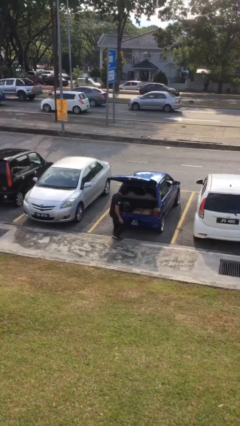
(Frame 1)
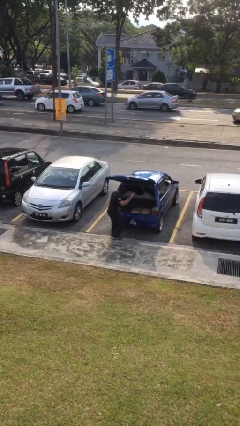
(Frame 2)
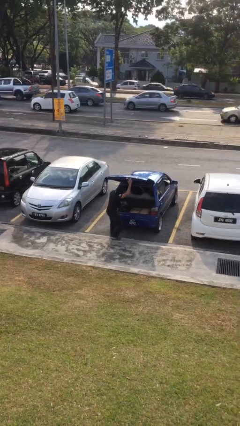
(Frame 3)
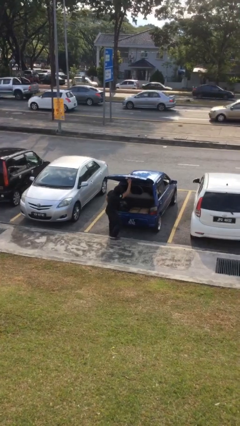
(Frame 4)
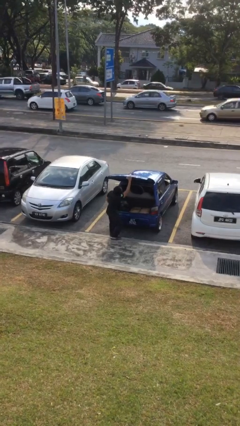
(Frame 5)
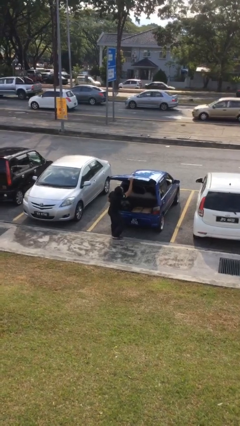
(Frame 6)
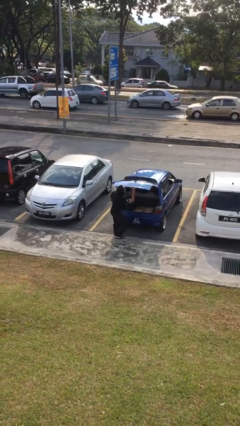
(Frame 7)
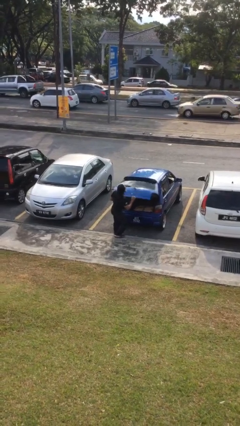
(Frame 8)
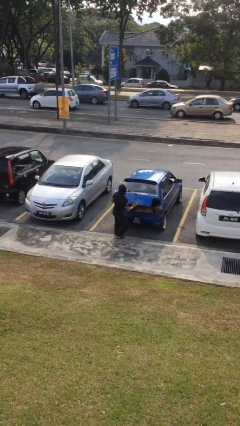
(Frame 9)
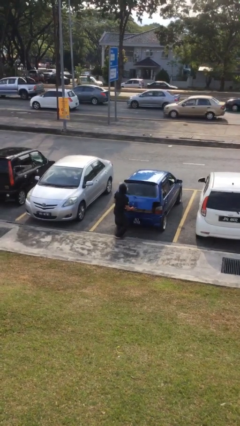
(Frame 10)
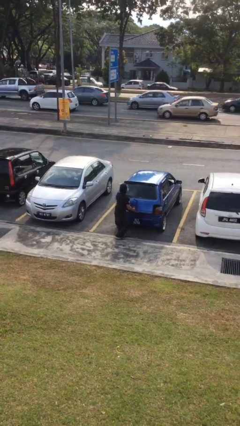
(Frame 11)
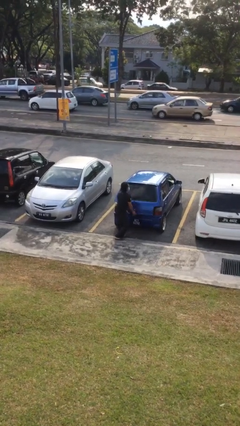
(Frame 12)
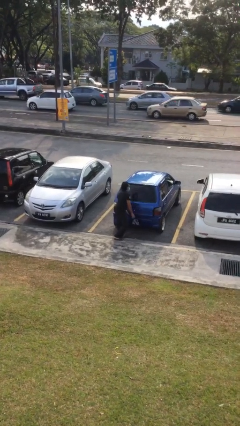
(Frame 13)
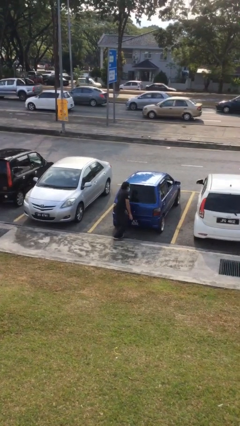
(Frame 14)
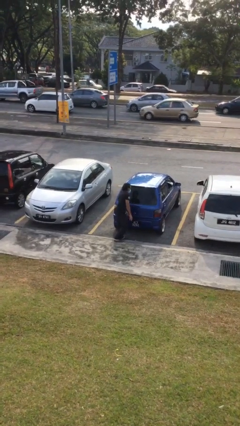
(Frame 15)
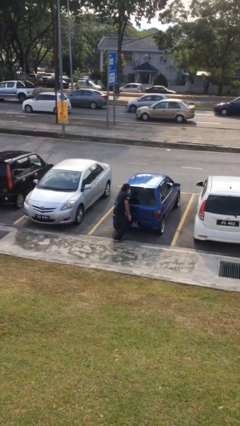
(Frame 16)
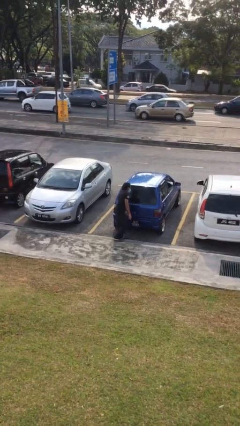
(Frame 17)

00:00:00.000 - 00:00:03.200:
person closes car trunk

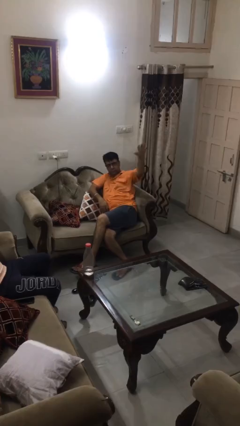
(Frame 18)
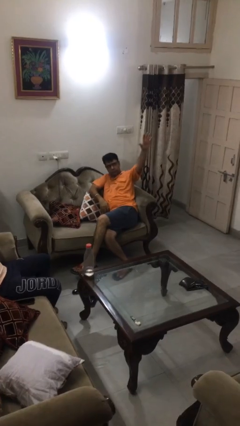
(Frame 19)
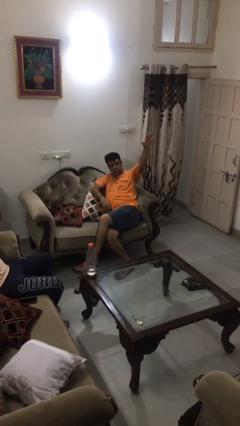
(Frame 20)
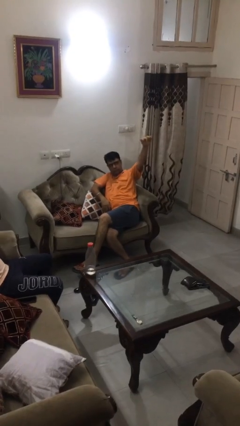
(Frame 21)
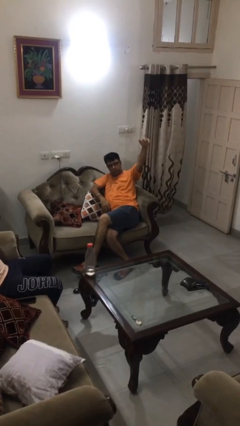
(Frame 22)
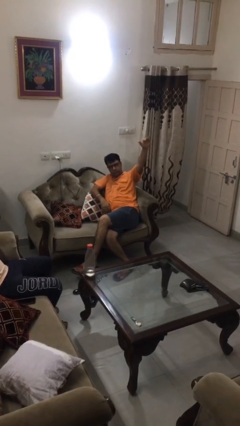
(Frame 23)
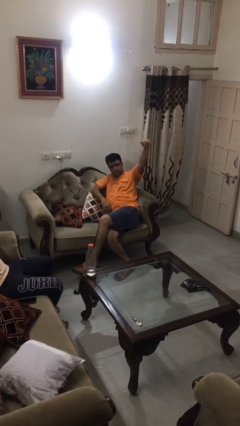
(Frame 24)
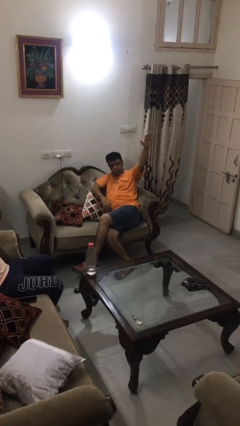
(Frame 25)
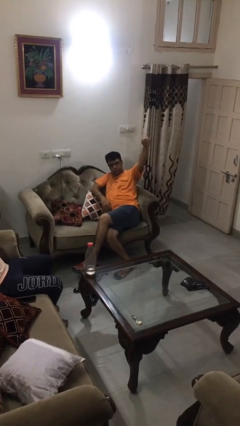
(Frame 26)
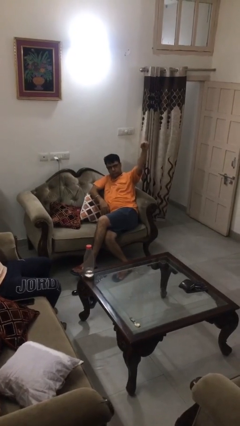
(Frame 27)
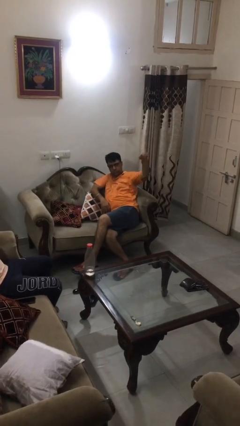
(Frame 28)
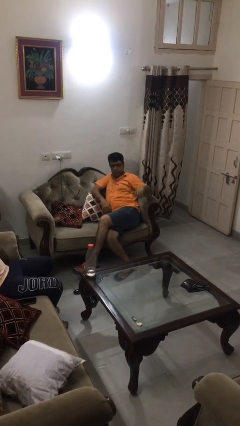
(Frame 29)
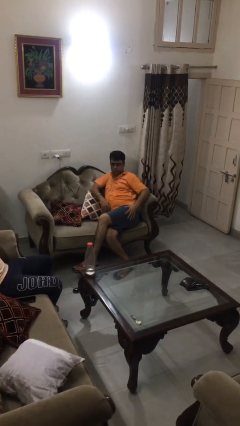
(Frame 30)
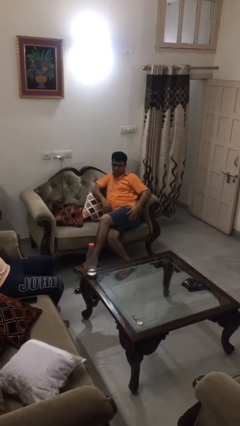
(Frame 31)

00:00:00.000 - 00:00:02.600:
person gestures come here

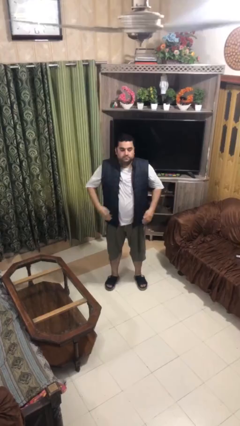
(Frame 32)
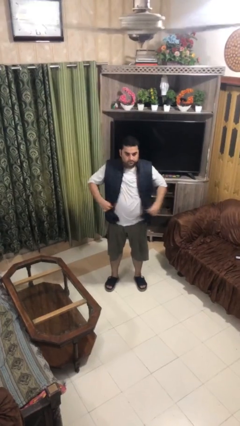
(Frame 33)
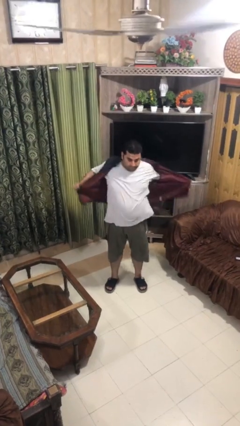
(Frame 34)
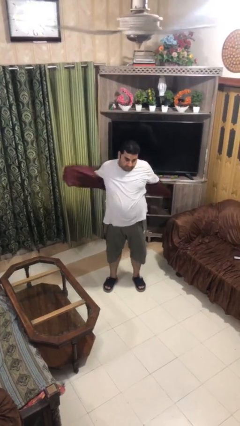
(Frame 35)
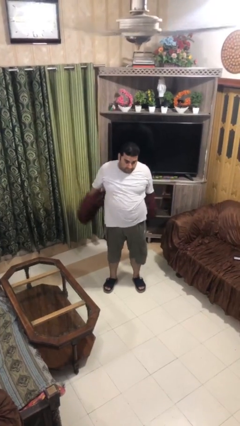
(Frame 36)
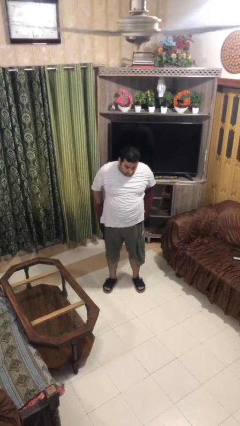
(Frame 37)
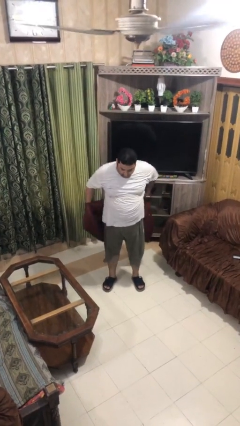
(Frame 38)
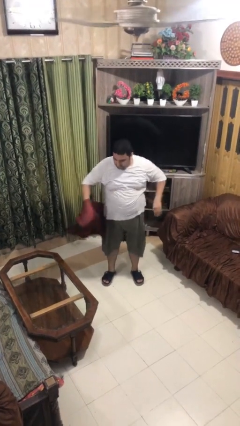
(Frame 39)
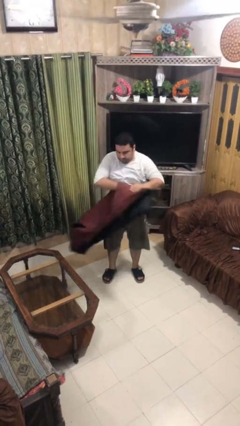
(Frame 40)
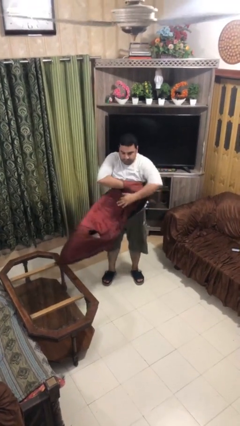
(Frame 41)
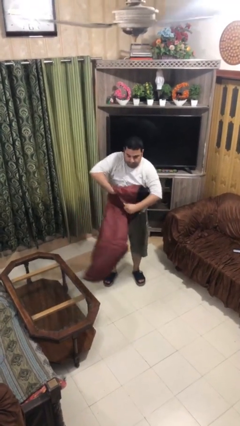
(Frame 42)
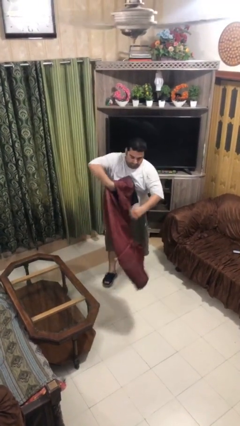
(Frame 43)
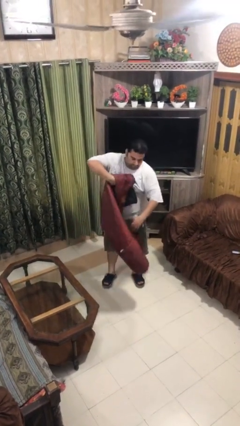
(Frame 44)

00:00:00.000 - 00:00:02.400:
person takes off jacket

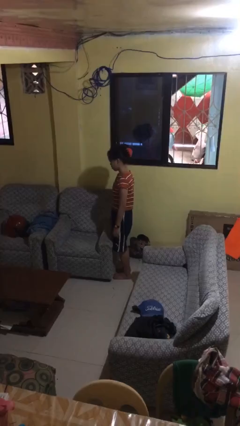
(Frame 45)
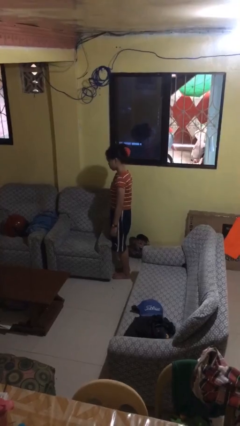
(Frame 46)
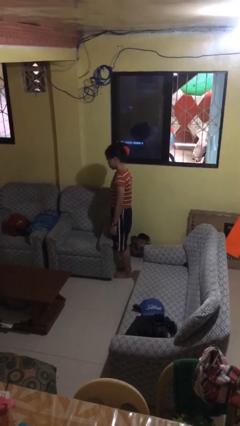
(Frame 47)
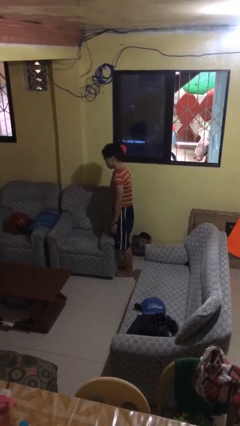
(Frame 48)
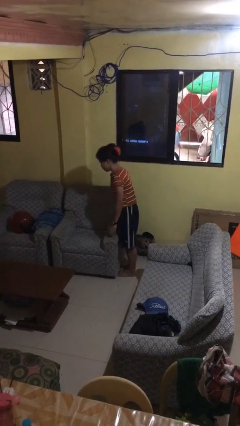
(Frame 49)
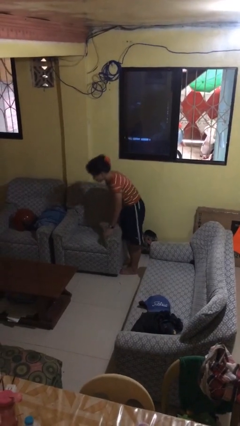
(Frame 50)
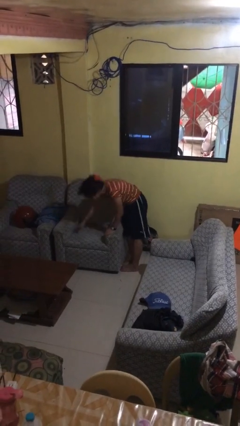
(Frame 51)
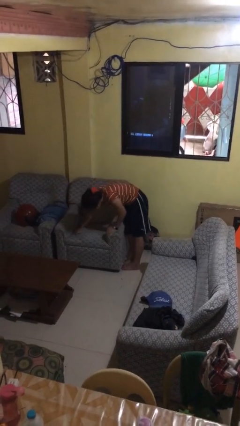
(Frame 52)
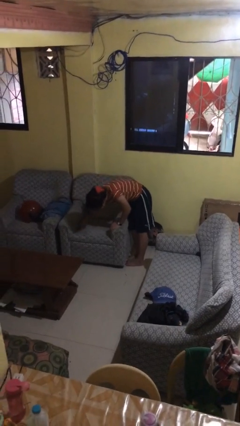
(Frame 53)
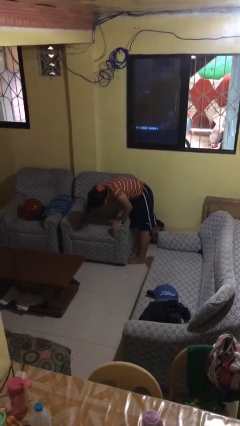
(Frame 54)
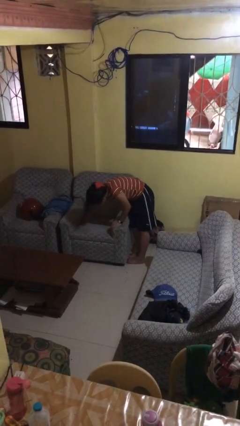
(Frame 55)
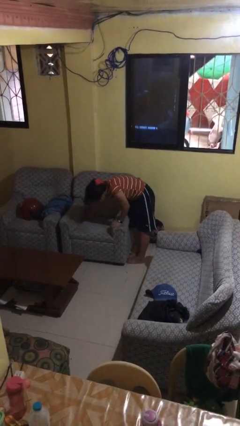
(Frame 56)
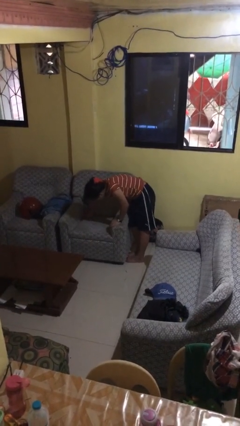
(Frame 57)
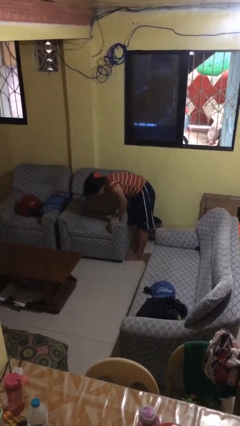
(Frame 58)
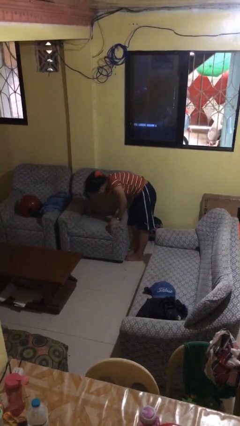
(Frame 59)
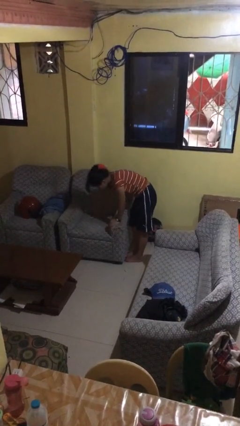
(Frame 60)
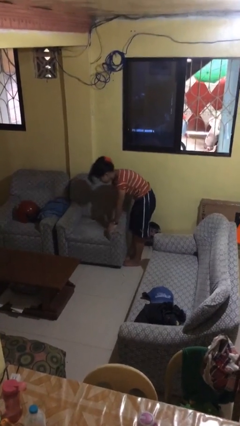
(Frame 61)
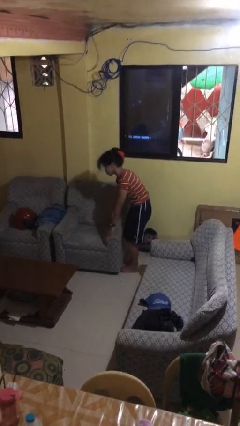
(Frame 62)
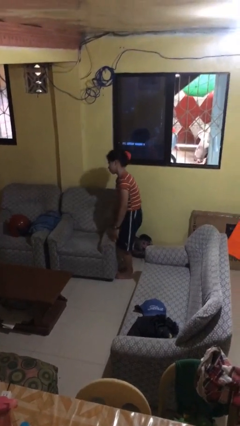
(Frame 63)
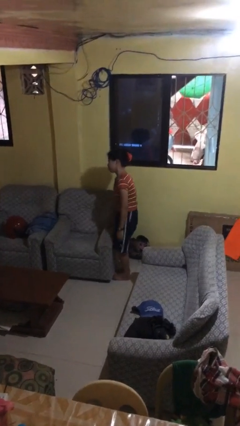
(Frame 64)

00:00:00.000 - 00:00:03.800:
person searches in couch

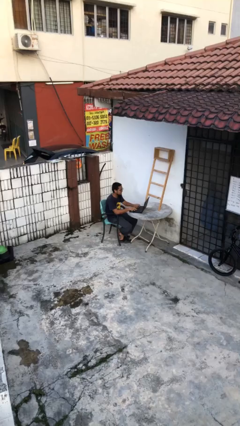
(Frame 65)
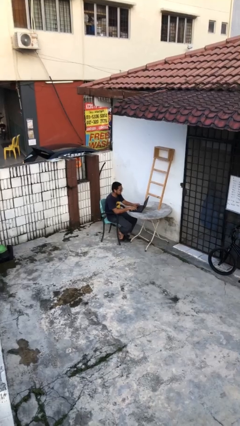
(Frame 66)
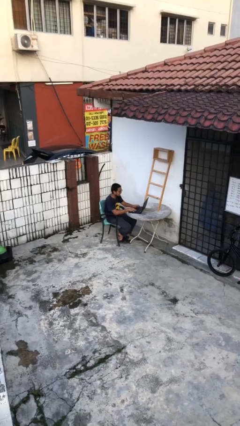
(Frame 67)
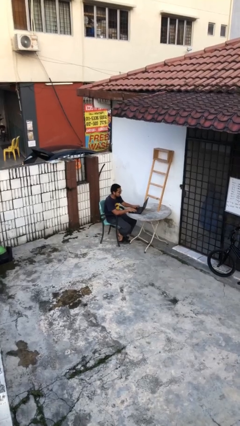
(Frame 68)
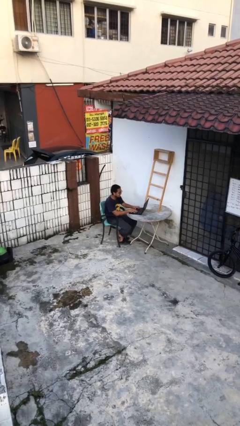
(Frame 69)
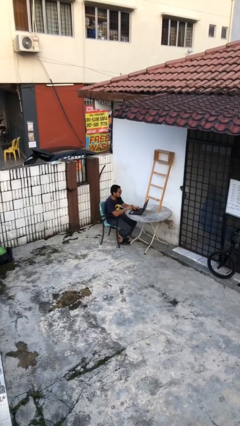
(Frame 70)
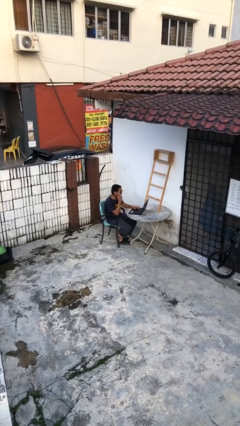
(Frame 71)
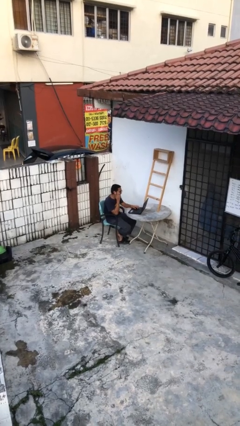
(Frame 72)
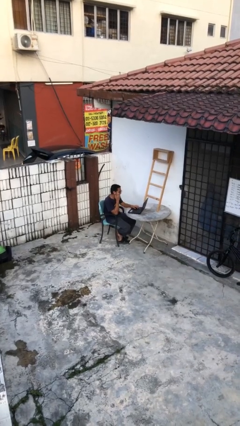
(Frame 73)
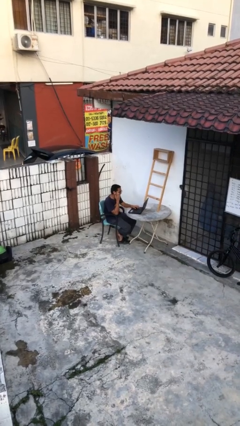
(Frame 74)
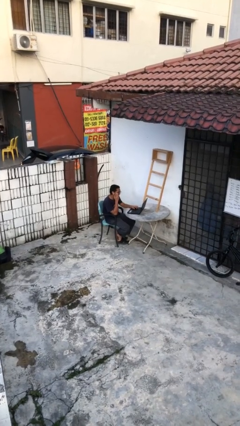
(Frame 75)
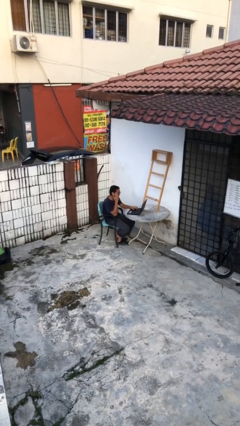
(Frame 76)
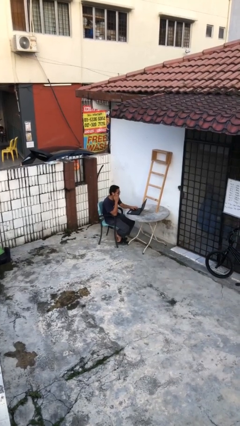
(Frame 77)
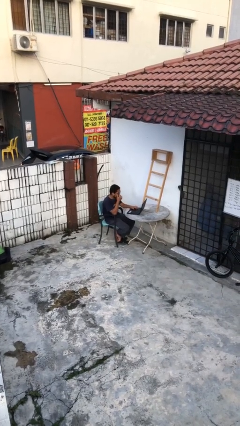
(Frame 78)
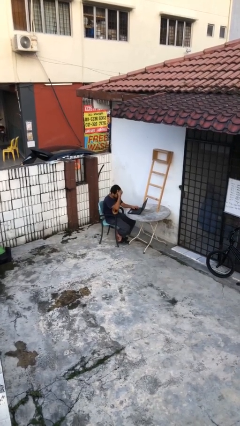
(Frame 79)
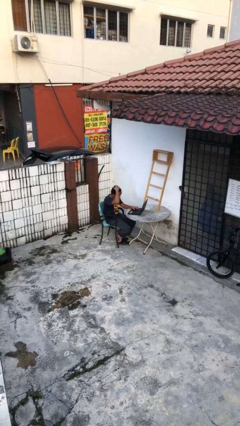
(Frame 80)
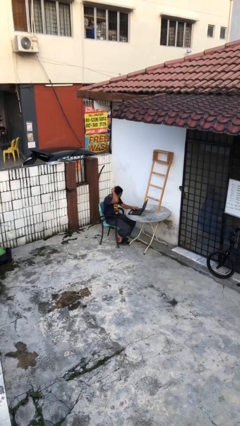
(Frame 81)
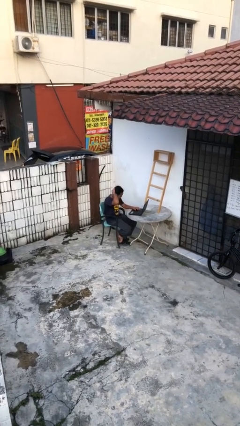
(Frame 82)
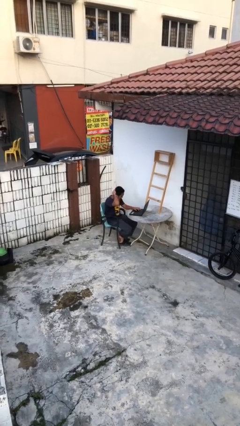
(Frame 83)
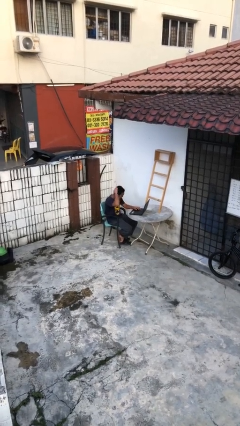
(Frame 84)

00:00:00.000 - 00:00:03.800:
person interacts with laptop

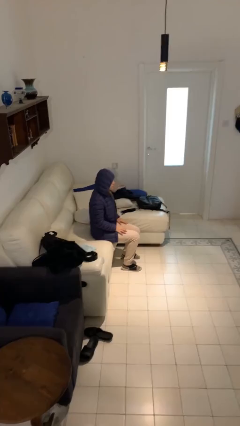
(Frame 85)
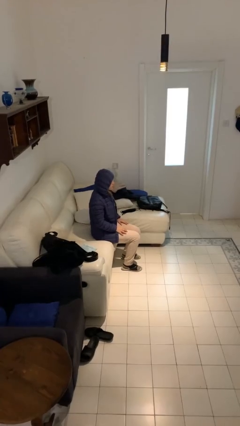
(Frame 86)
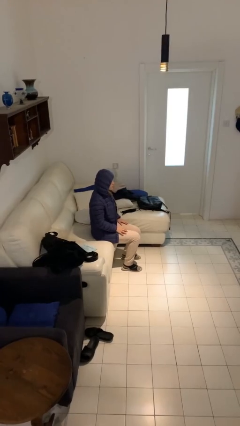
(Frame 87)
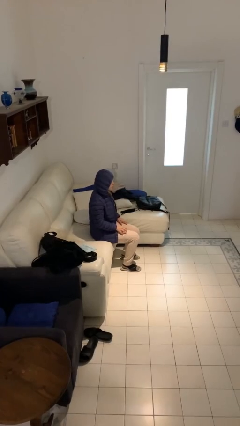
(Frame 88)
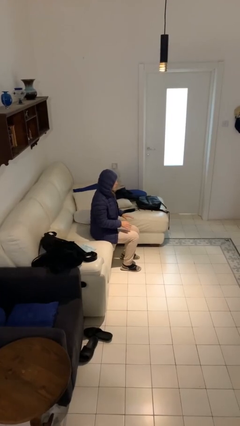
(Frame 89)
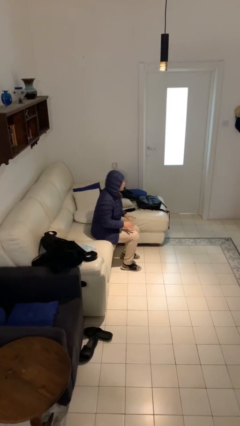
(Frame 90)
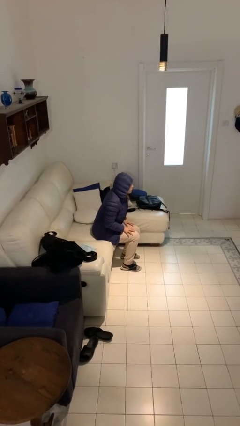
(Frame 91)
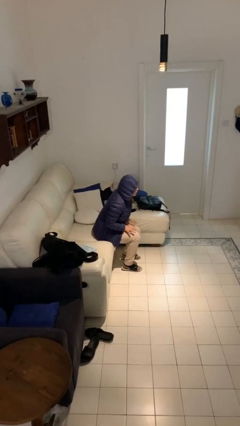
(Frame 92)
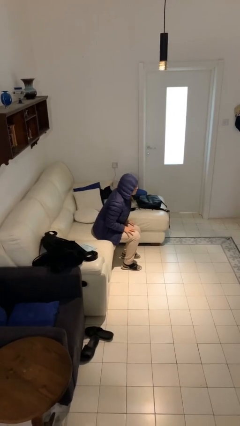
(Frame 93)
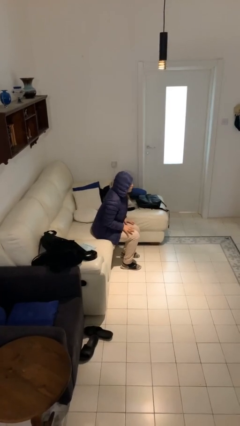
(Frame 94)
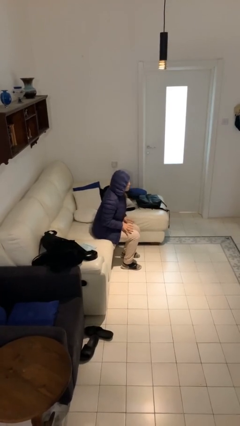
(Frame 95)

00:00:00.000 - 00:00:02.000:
person slaps hands on thighs
